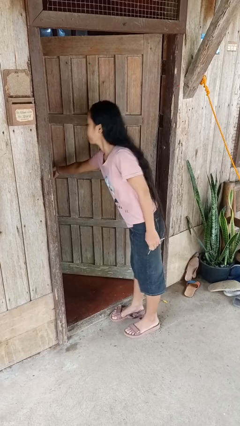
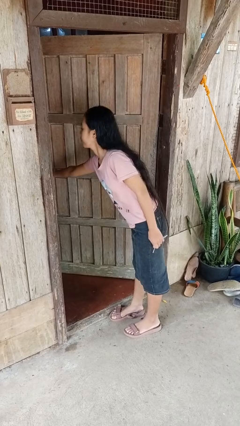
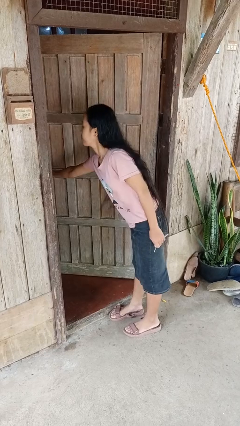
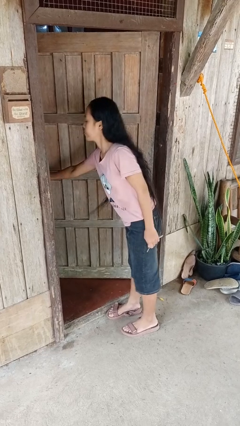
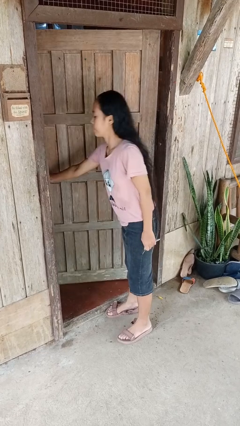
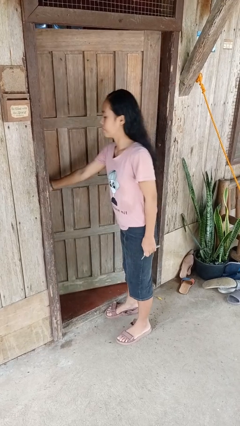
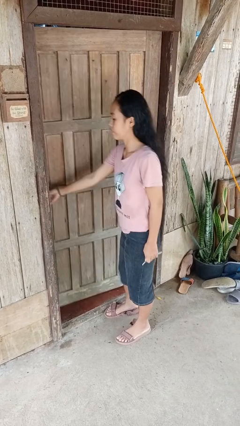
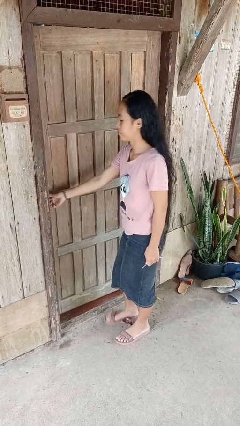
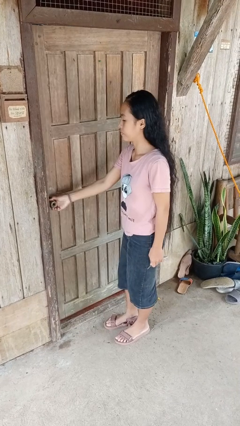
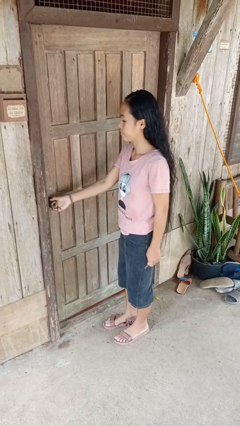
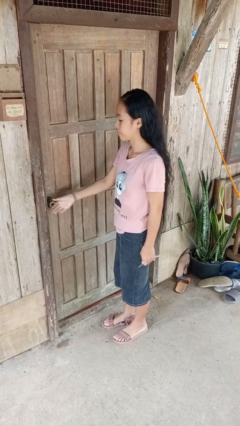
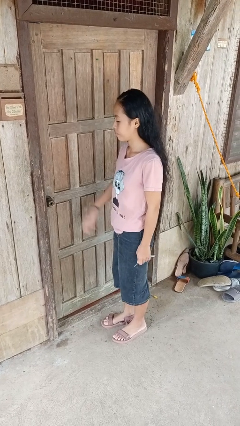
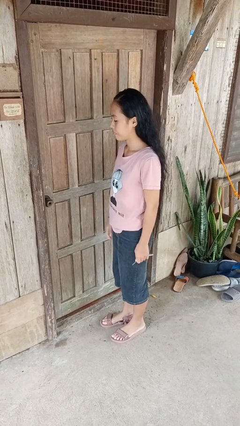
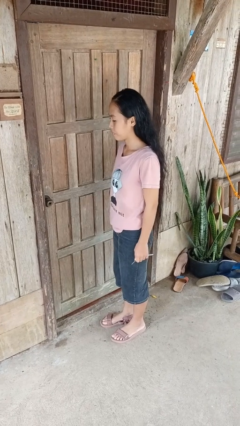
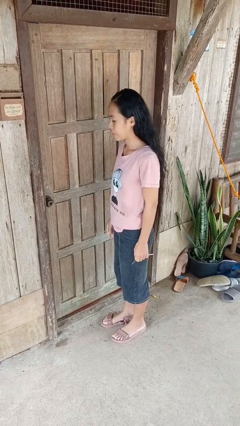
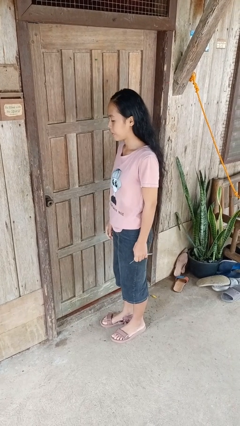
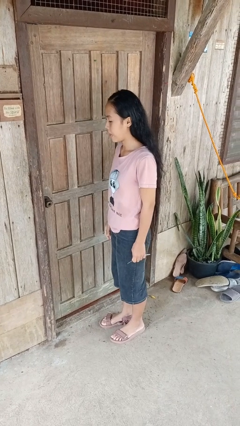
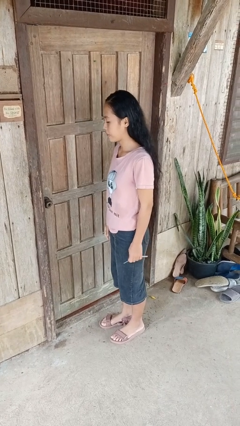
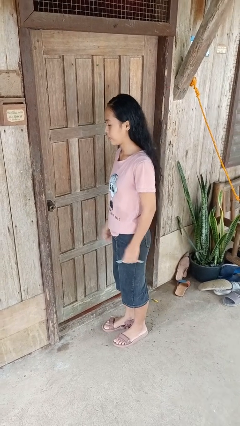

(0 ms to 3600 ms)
person closes facility door

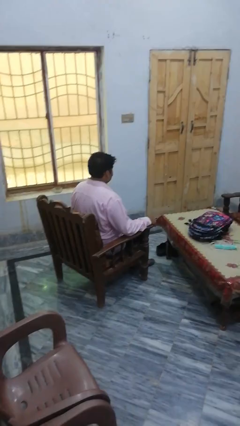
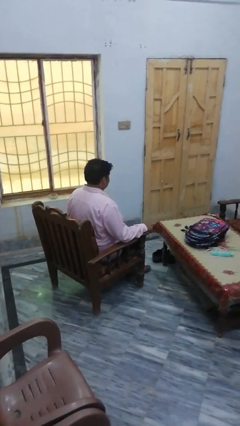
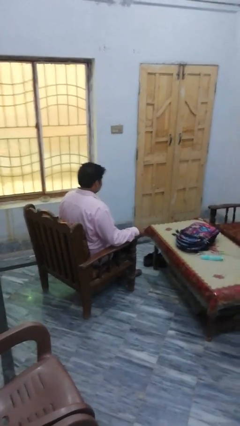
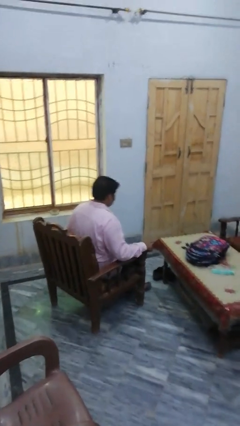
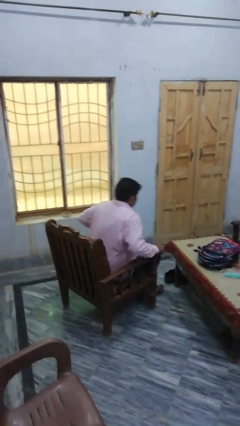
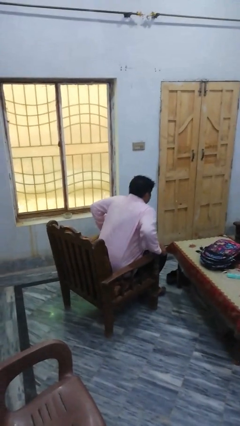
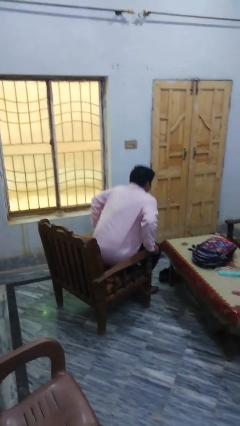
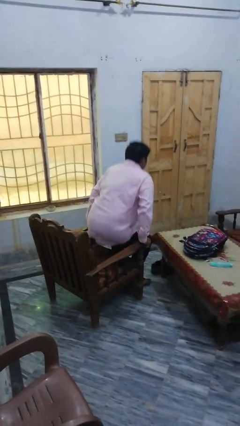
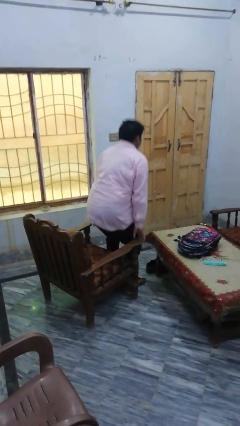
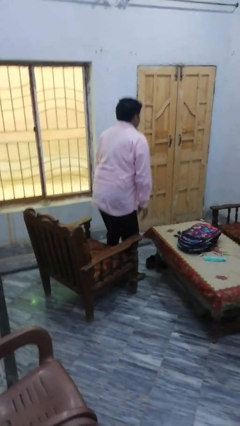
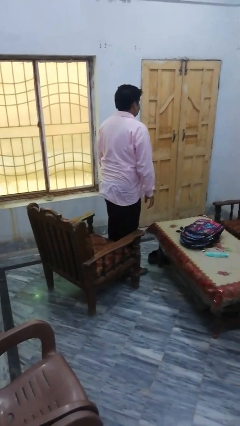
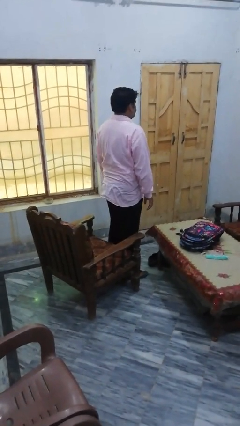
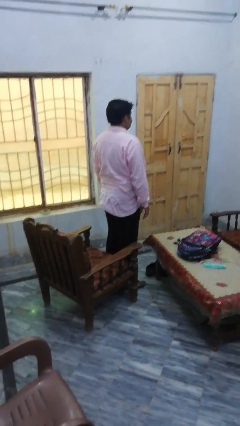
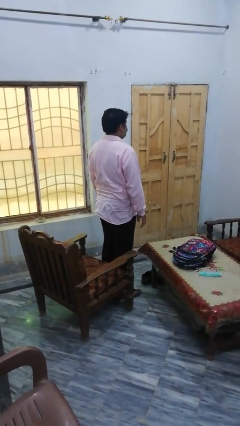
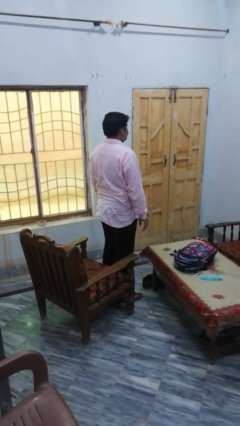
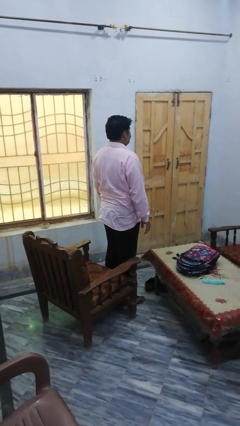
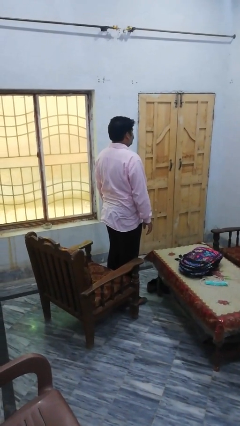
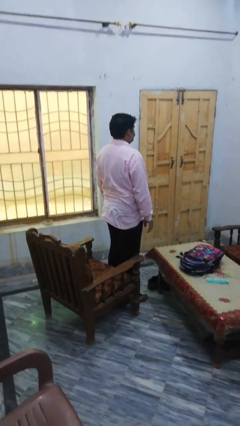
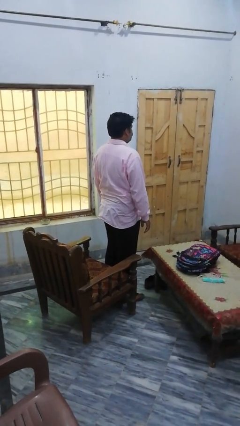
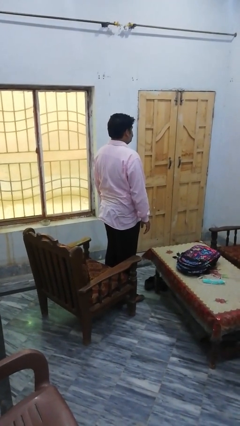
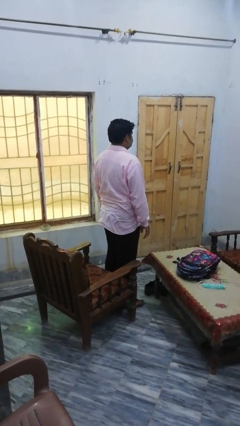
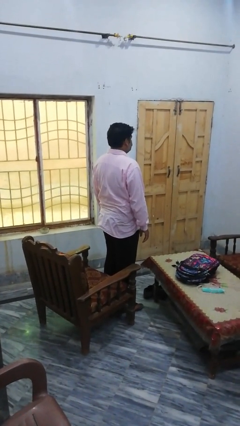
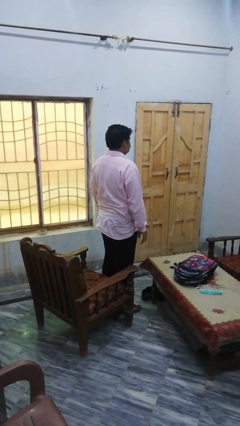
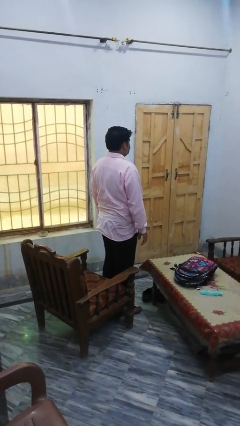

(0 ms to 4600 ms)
person stands up

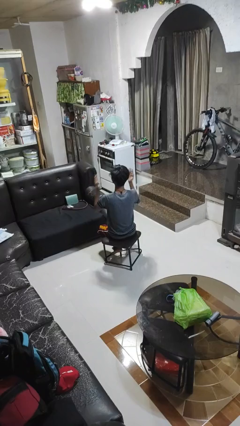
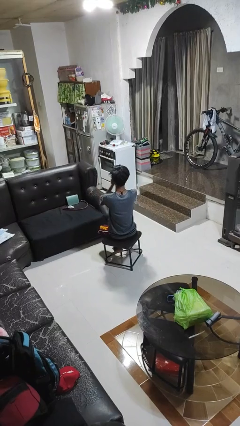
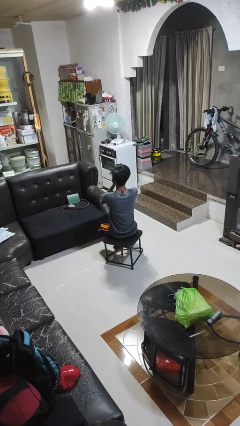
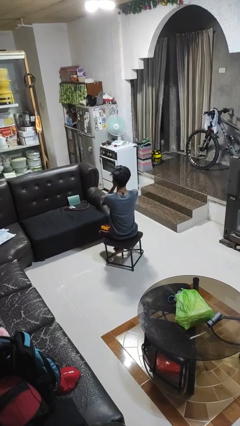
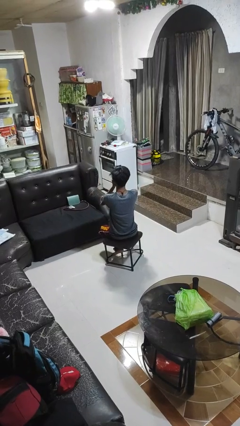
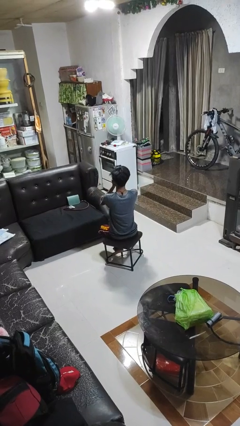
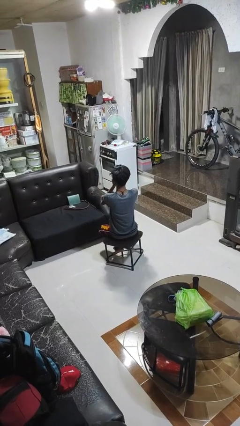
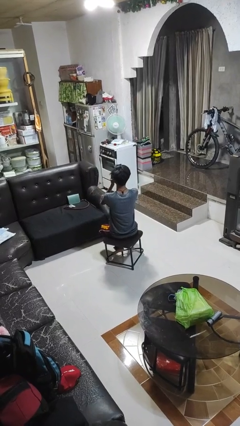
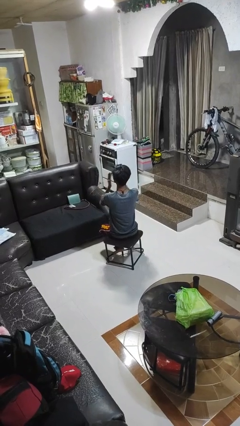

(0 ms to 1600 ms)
person covers face with hands

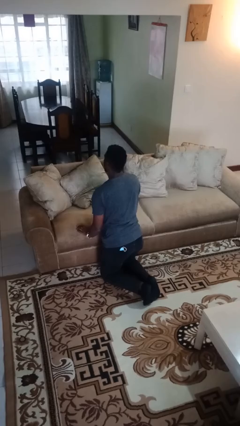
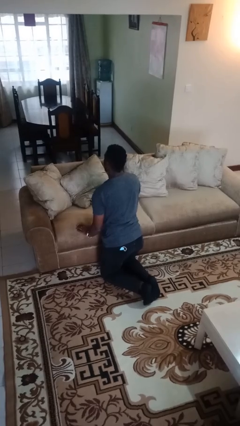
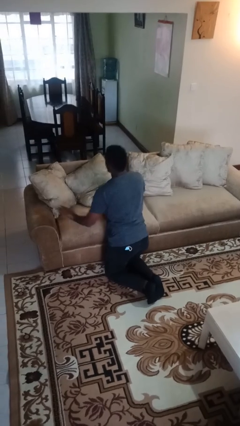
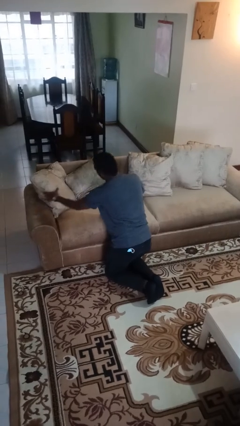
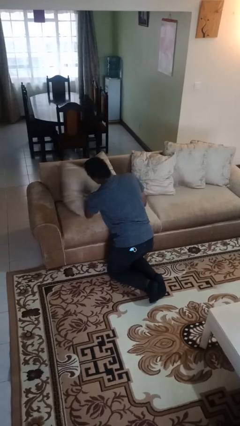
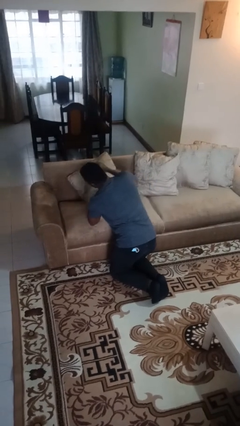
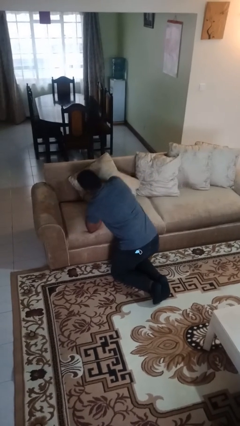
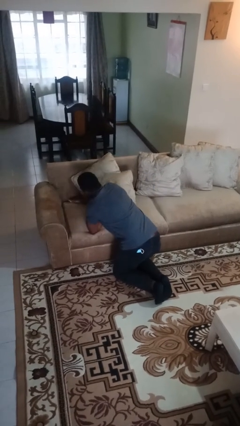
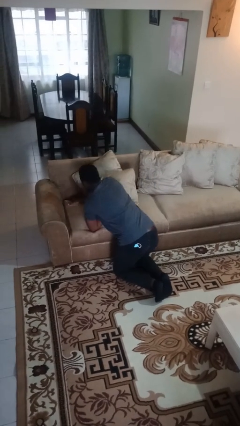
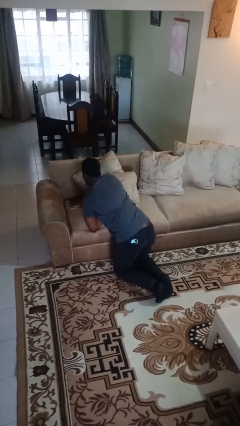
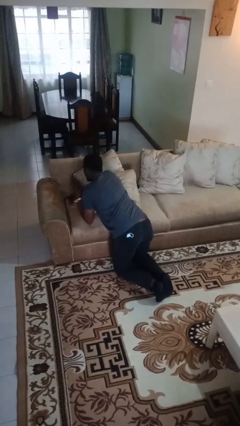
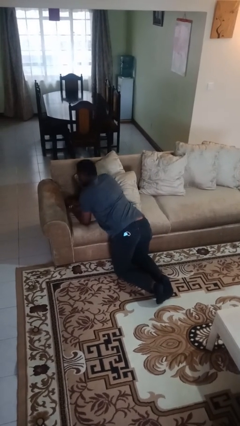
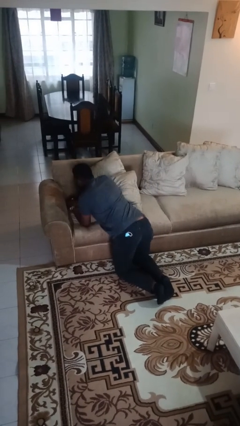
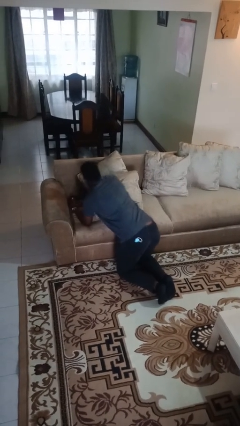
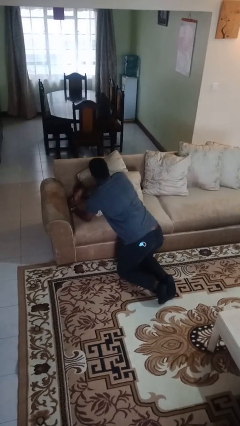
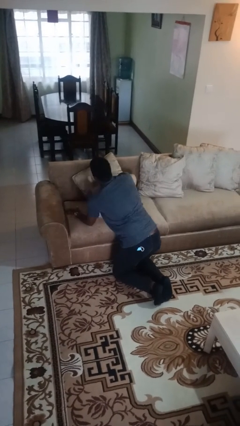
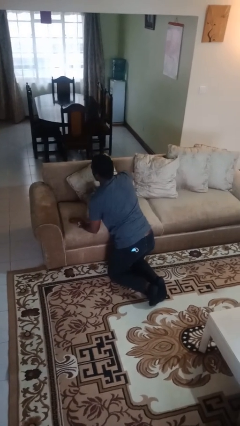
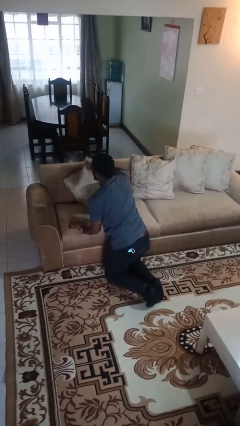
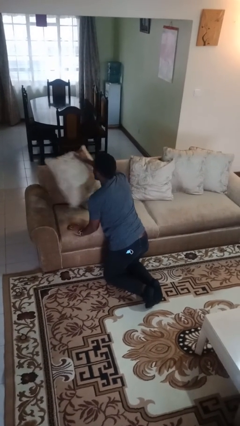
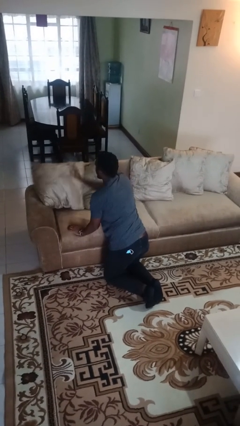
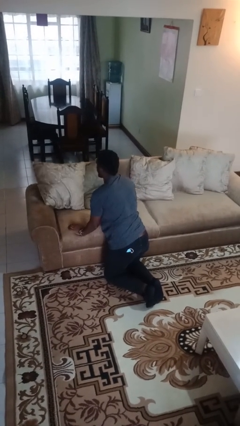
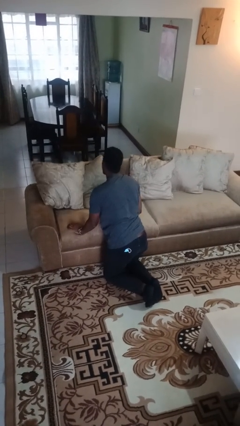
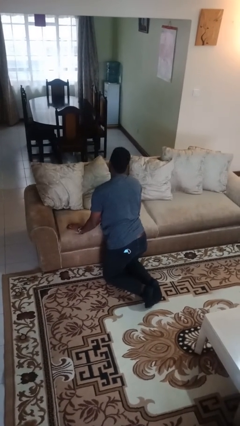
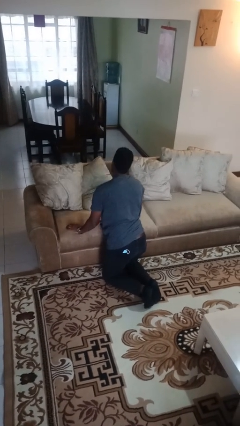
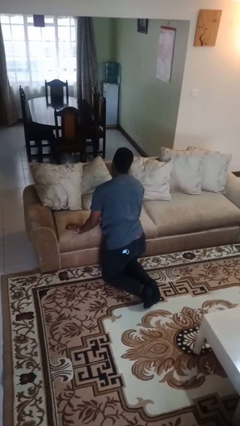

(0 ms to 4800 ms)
person searches in couch

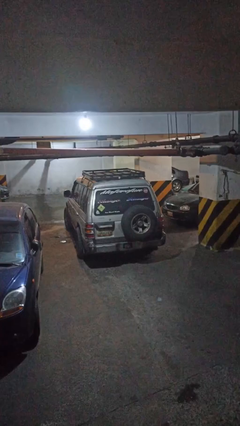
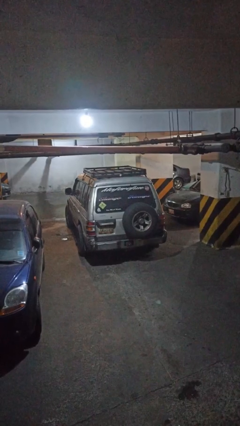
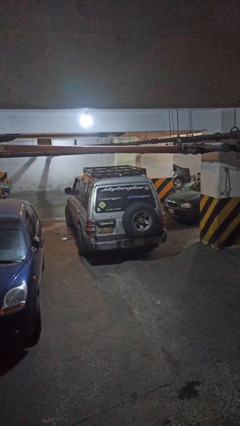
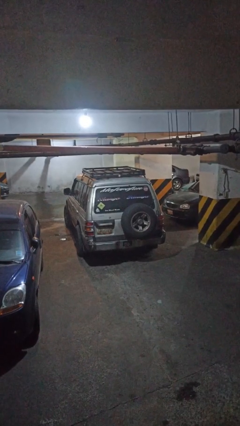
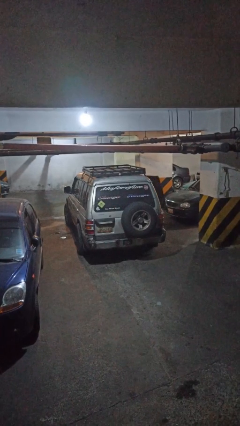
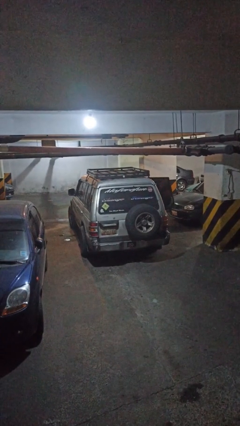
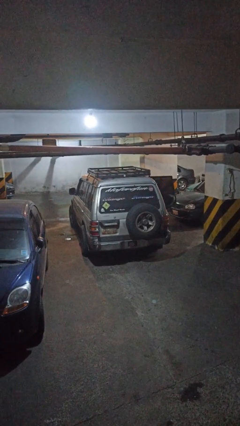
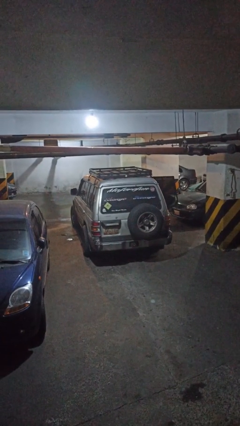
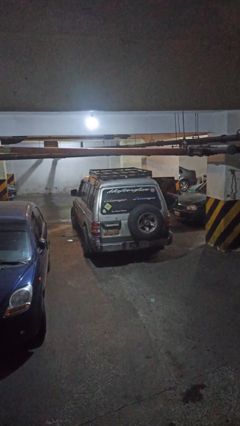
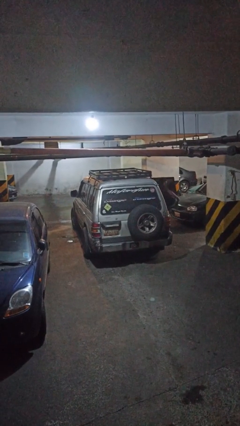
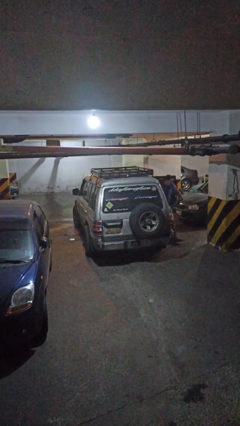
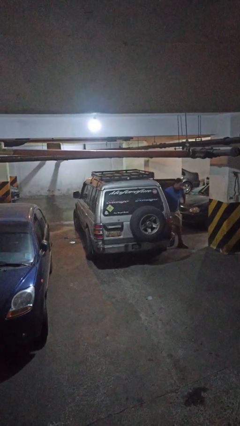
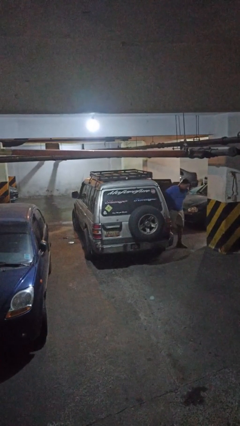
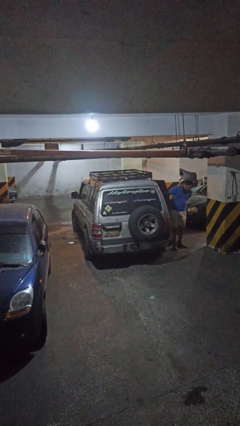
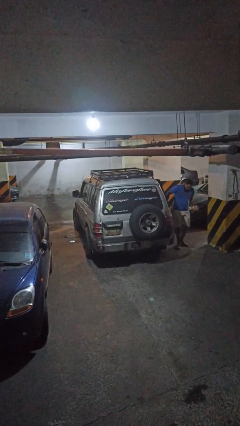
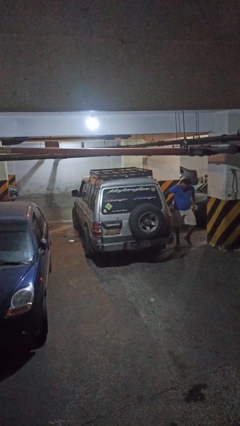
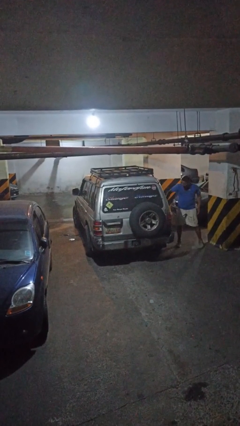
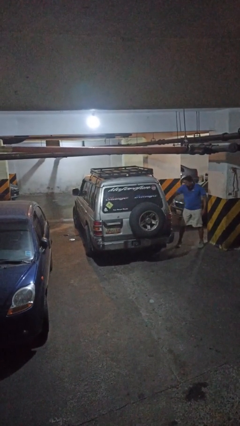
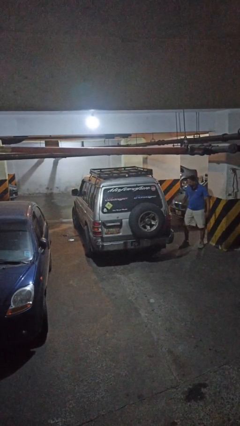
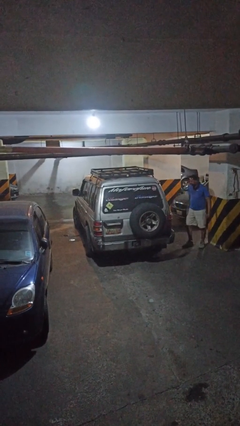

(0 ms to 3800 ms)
car drops off person
